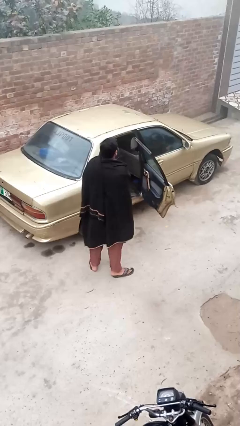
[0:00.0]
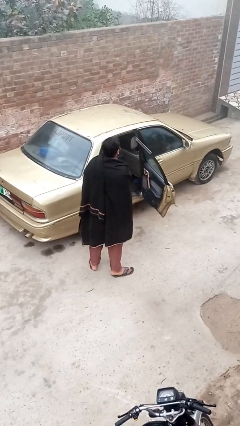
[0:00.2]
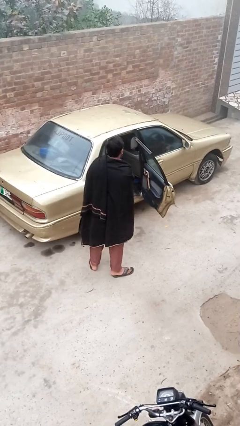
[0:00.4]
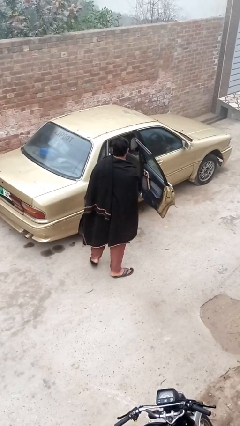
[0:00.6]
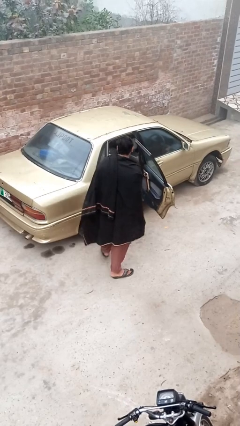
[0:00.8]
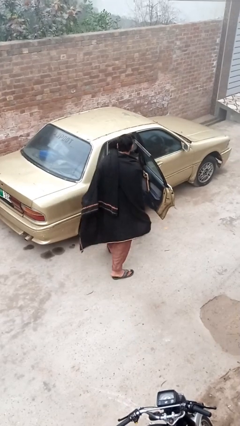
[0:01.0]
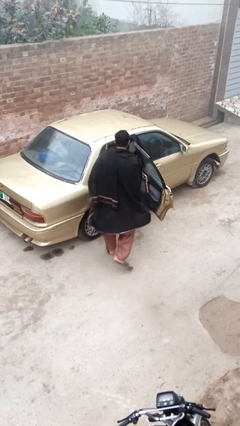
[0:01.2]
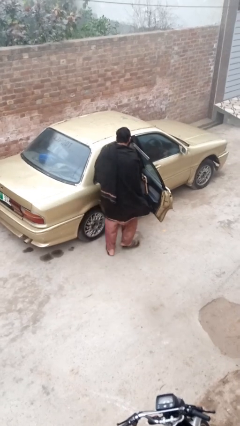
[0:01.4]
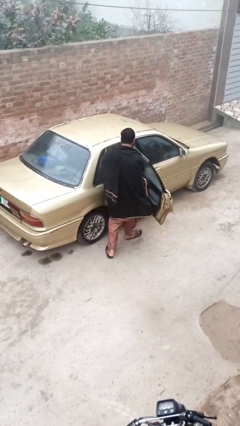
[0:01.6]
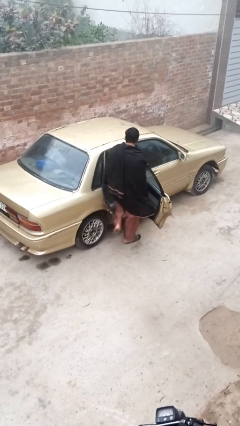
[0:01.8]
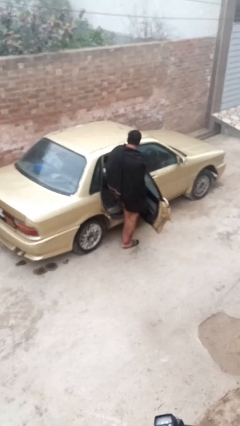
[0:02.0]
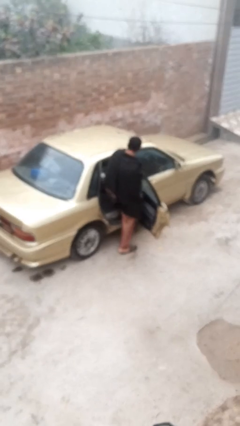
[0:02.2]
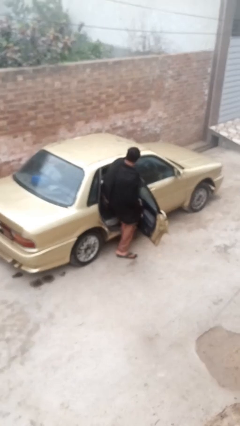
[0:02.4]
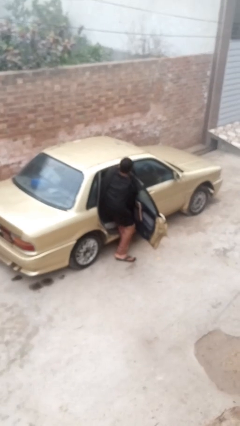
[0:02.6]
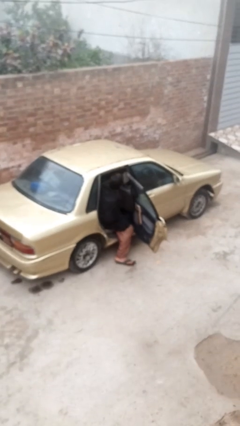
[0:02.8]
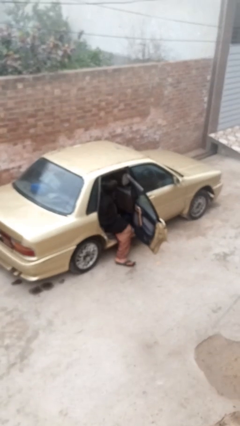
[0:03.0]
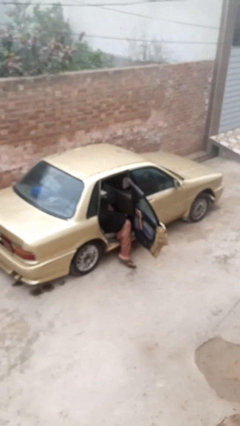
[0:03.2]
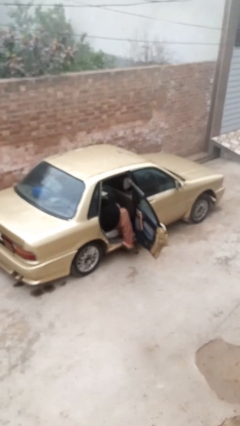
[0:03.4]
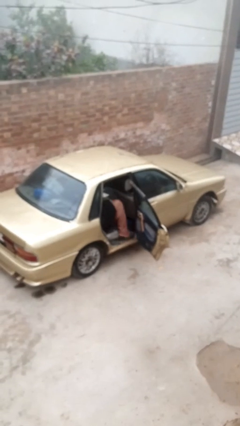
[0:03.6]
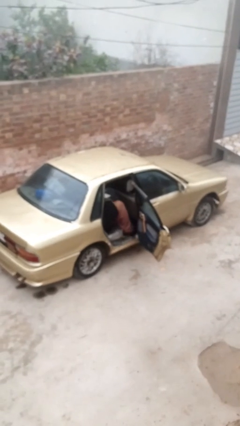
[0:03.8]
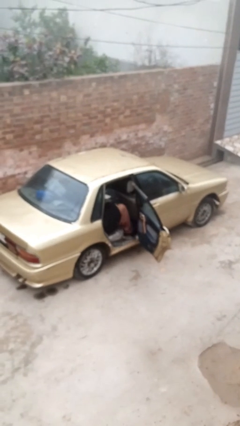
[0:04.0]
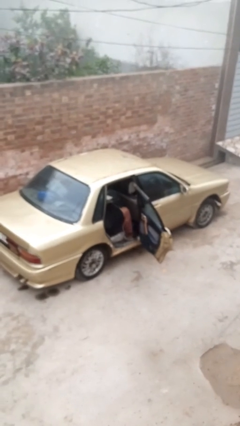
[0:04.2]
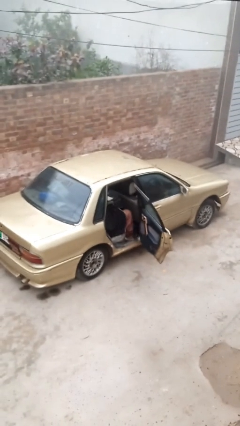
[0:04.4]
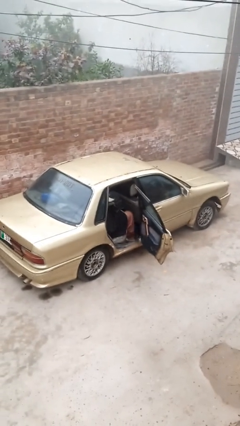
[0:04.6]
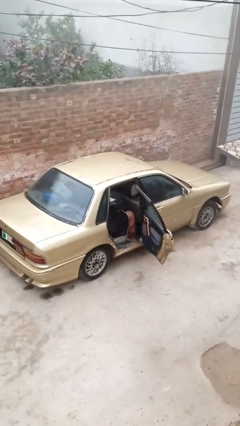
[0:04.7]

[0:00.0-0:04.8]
person enters car

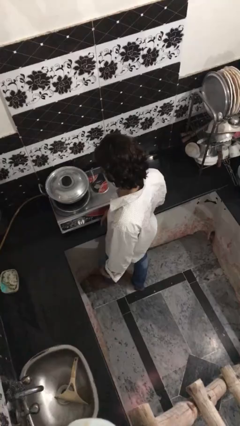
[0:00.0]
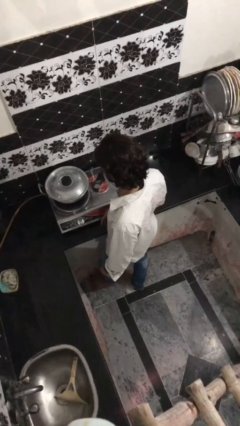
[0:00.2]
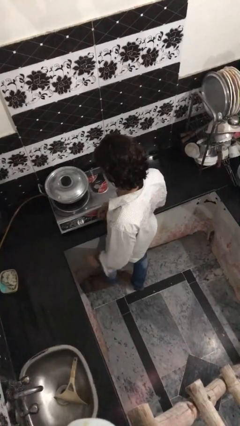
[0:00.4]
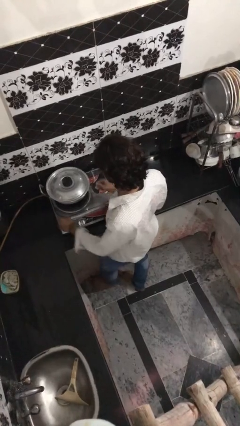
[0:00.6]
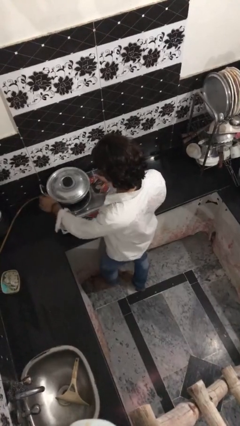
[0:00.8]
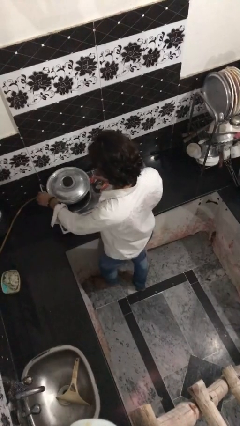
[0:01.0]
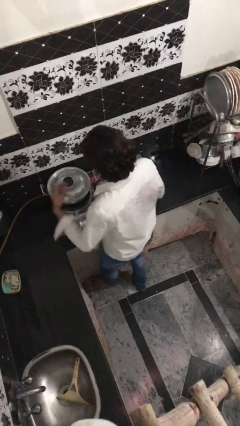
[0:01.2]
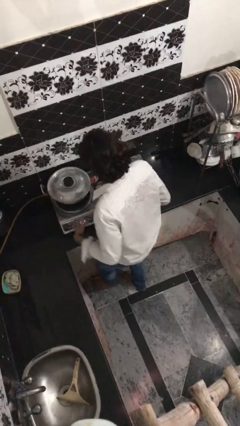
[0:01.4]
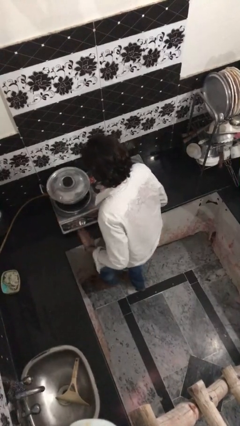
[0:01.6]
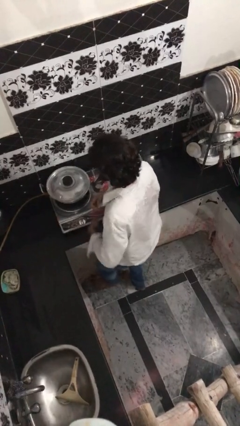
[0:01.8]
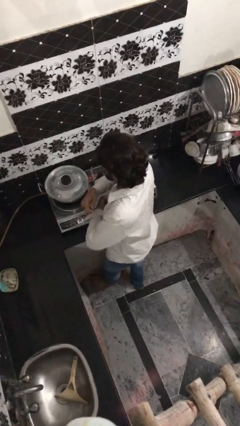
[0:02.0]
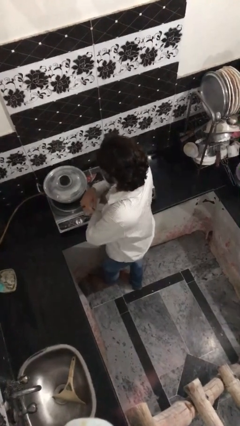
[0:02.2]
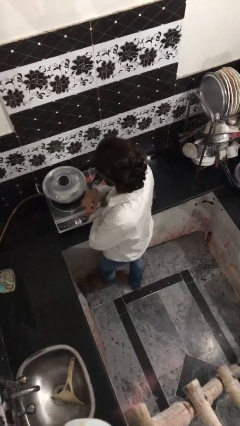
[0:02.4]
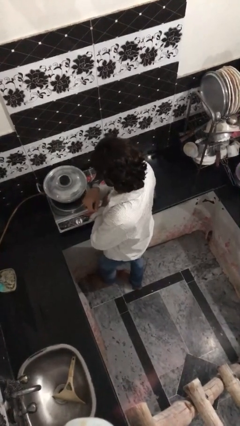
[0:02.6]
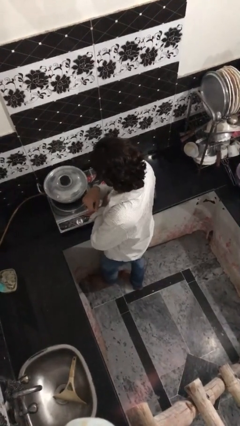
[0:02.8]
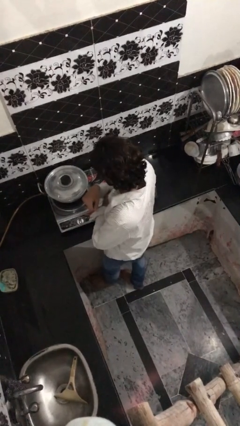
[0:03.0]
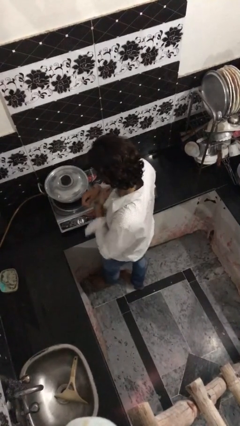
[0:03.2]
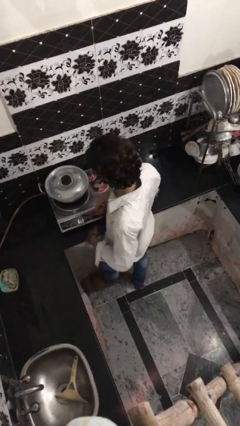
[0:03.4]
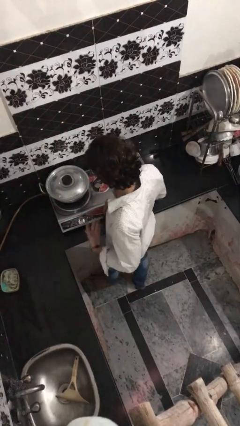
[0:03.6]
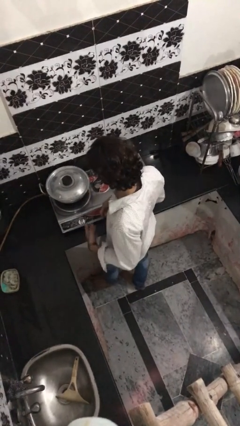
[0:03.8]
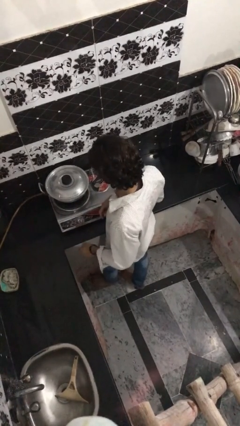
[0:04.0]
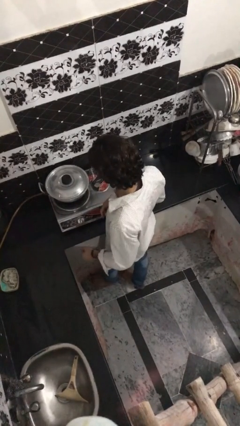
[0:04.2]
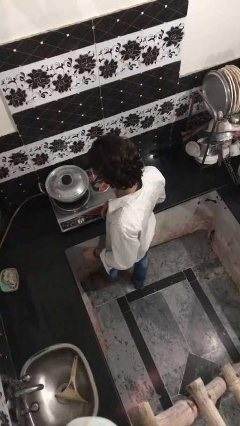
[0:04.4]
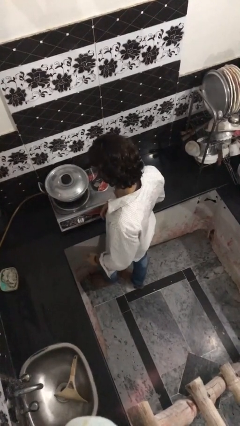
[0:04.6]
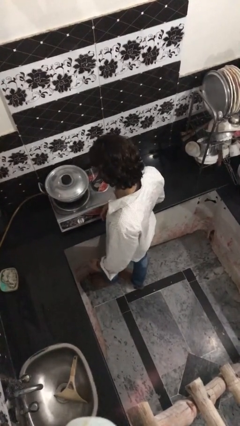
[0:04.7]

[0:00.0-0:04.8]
person burns hand

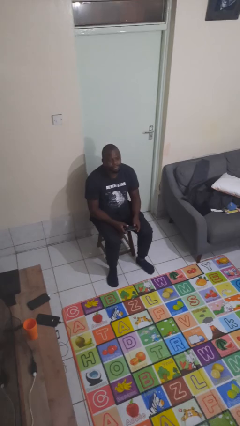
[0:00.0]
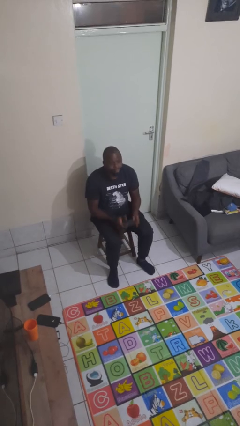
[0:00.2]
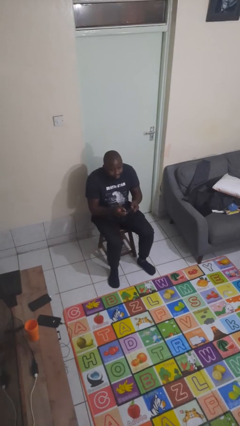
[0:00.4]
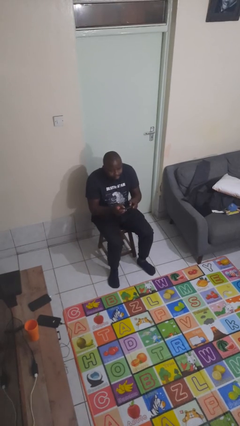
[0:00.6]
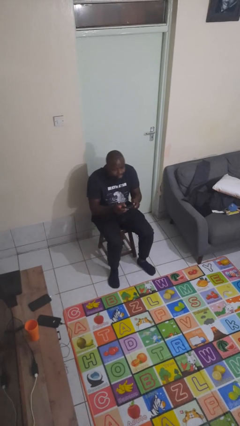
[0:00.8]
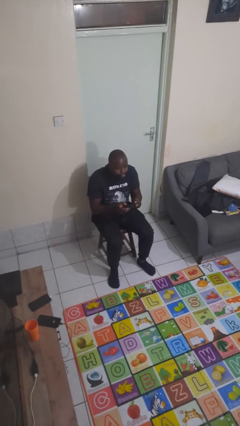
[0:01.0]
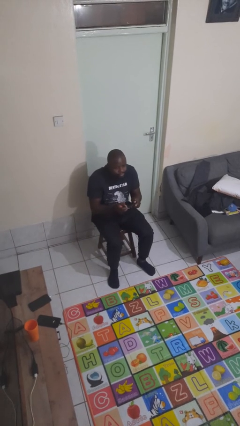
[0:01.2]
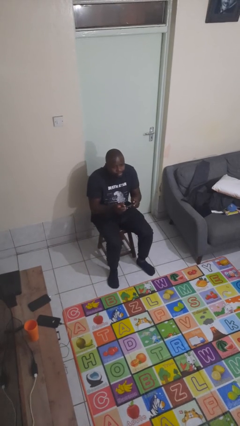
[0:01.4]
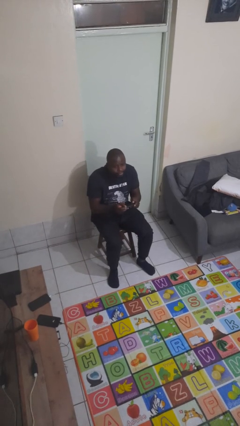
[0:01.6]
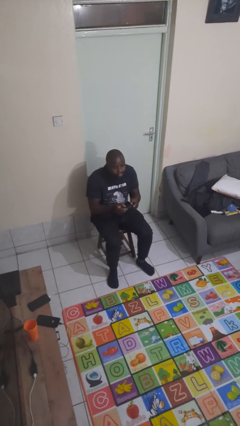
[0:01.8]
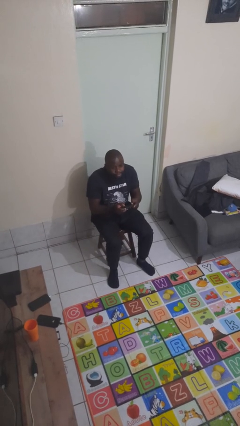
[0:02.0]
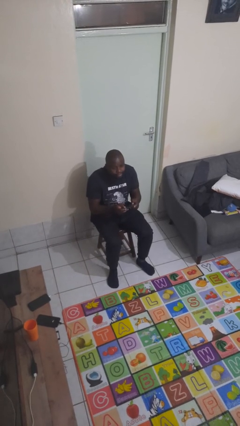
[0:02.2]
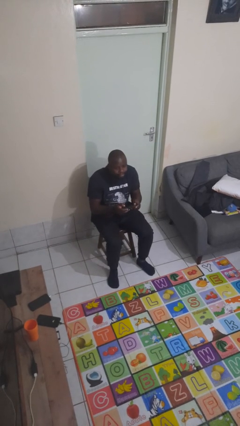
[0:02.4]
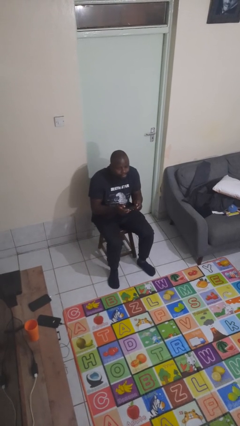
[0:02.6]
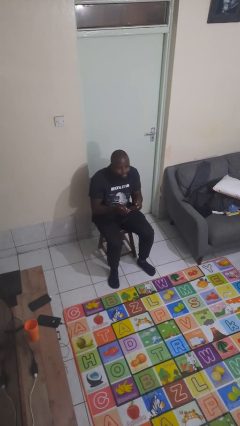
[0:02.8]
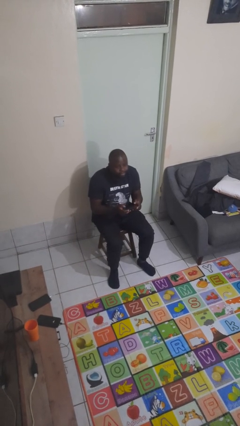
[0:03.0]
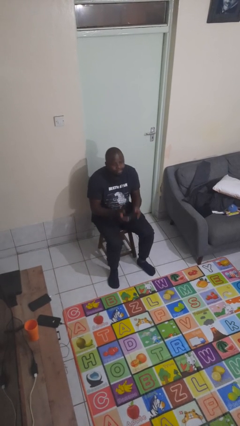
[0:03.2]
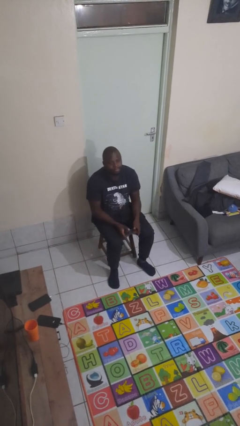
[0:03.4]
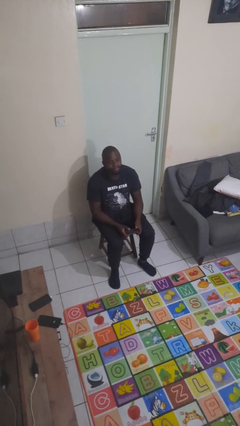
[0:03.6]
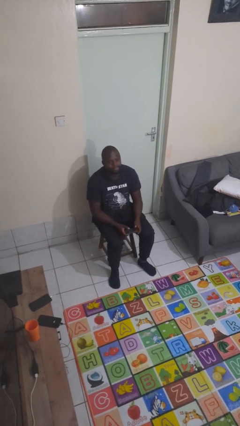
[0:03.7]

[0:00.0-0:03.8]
person interacts with handheld game

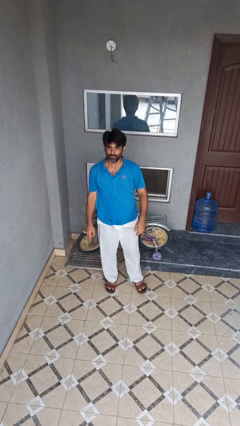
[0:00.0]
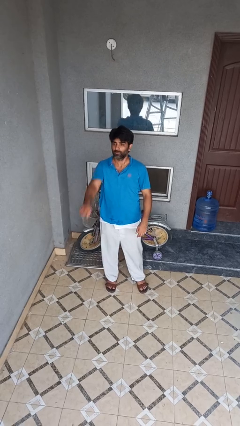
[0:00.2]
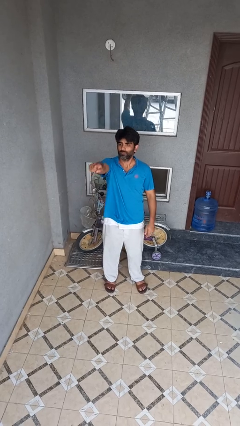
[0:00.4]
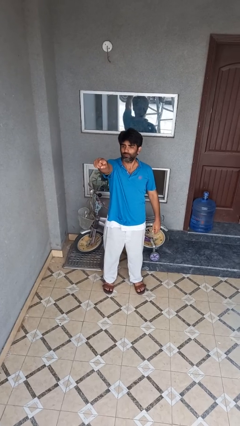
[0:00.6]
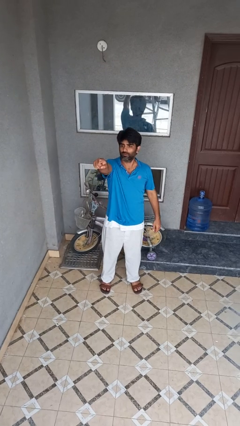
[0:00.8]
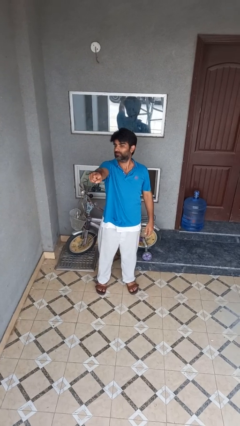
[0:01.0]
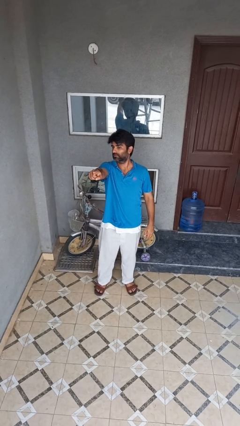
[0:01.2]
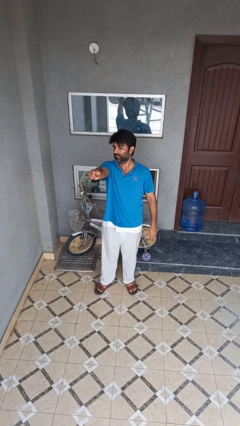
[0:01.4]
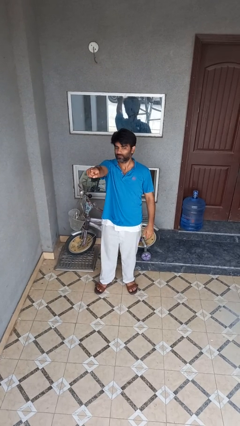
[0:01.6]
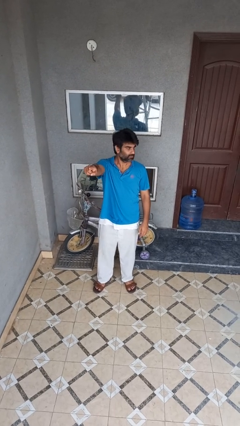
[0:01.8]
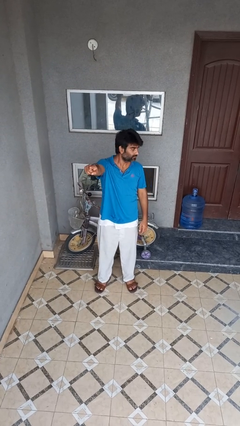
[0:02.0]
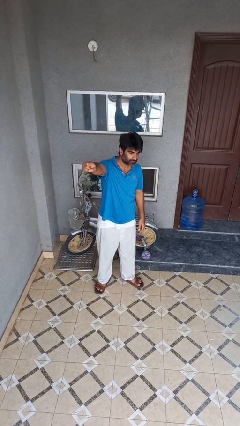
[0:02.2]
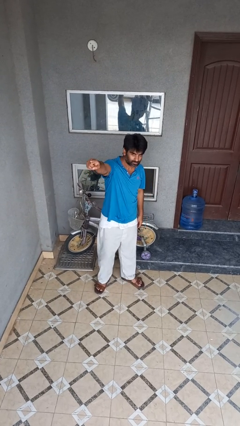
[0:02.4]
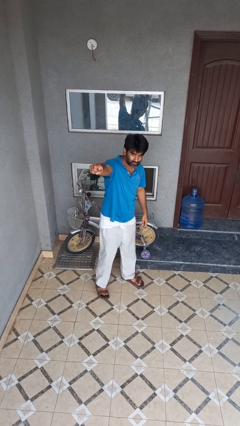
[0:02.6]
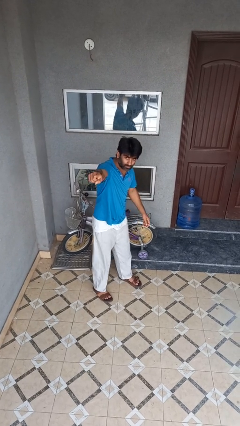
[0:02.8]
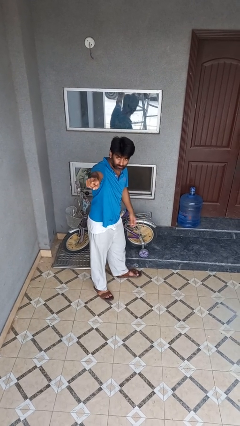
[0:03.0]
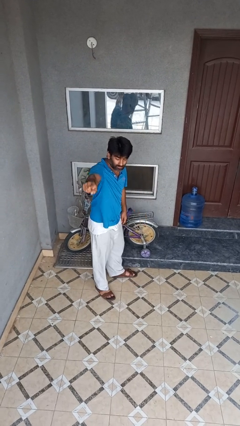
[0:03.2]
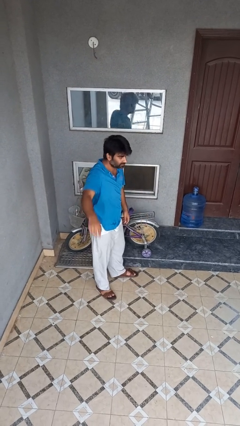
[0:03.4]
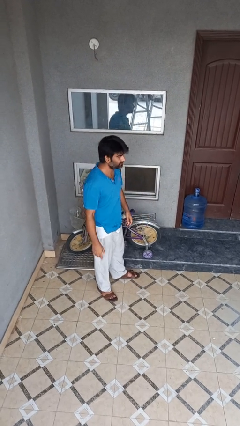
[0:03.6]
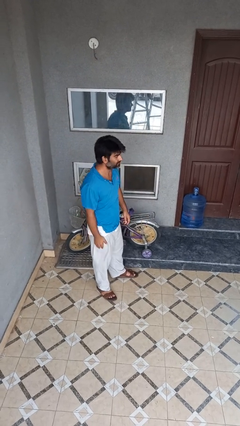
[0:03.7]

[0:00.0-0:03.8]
person points at person

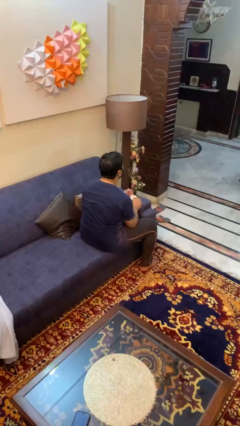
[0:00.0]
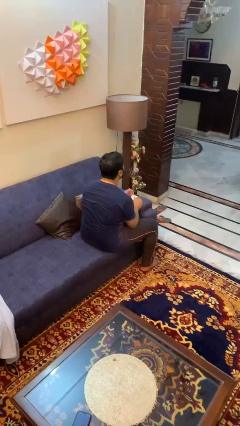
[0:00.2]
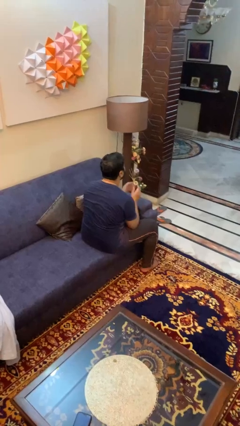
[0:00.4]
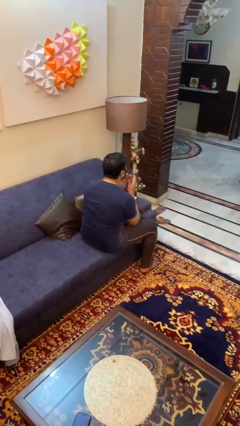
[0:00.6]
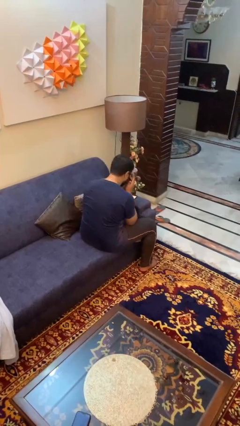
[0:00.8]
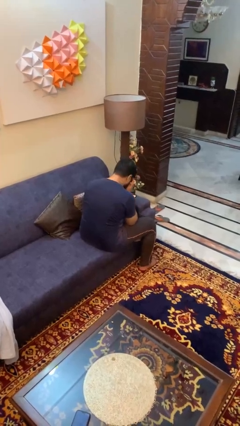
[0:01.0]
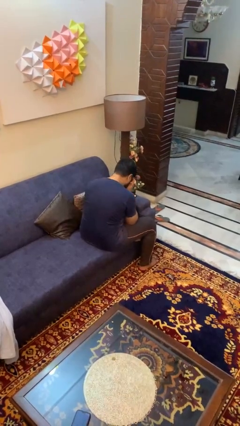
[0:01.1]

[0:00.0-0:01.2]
person sneezes into hand
